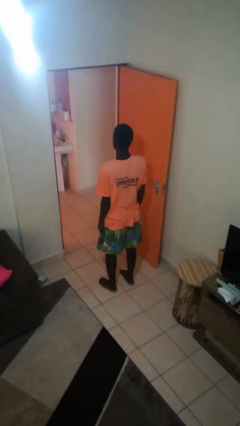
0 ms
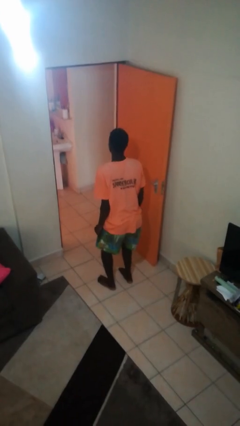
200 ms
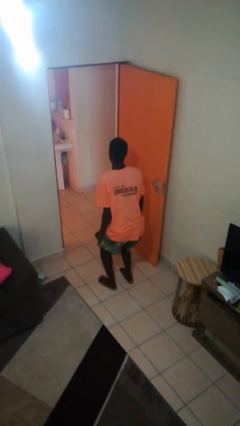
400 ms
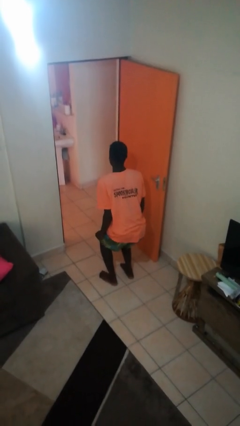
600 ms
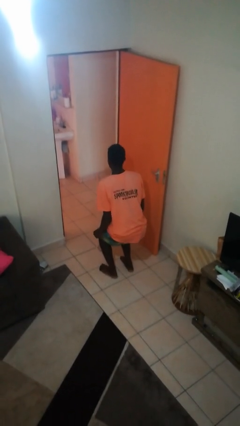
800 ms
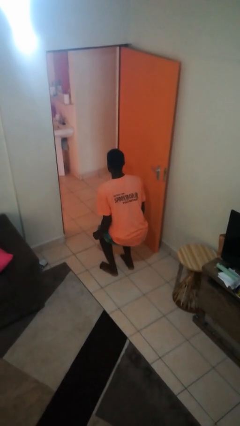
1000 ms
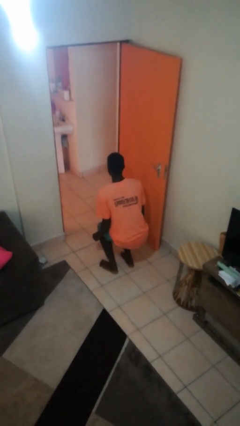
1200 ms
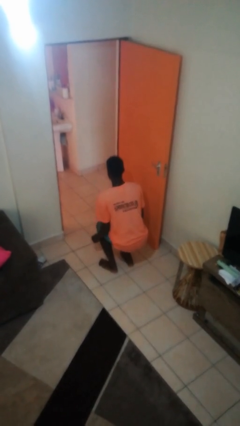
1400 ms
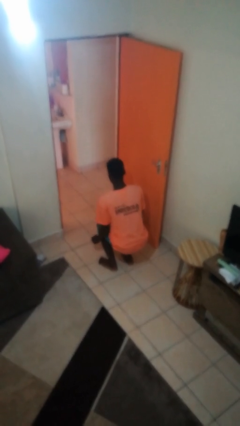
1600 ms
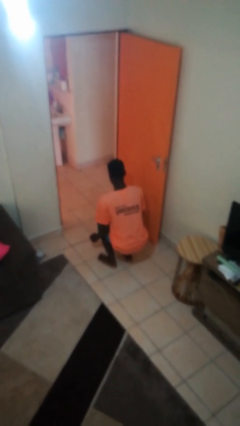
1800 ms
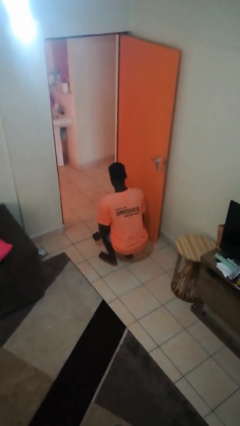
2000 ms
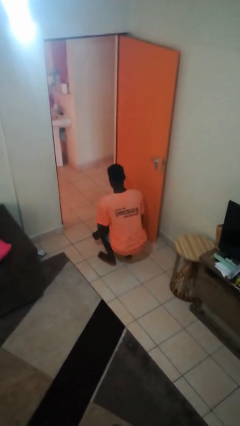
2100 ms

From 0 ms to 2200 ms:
person squats

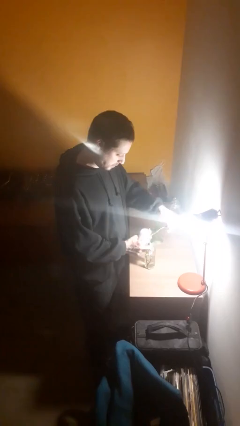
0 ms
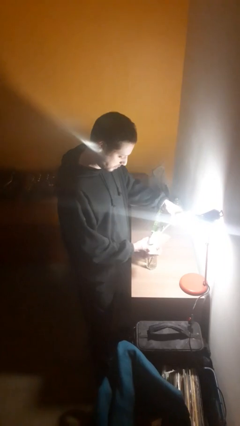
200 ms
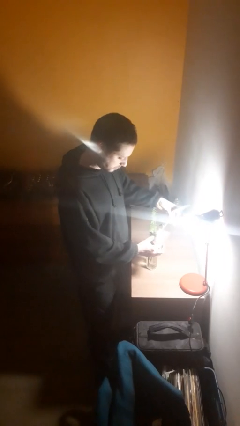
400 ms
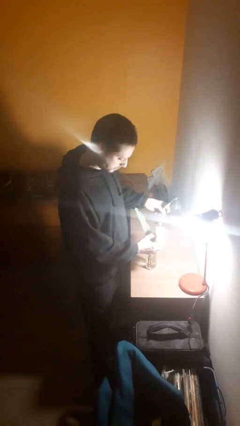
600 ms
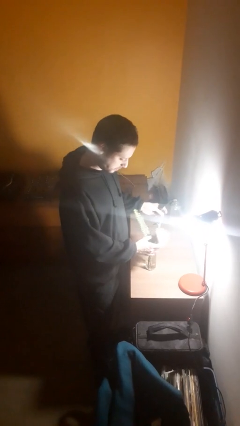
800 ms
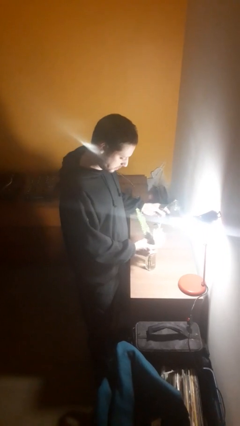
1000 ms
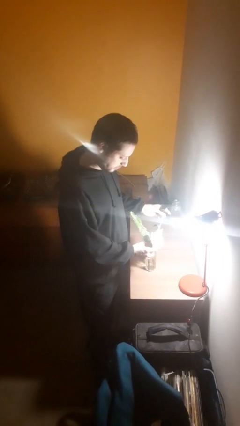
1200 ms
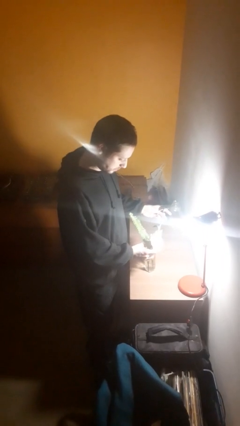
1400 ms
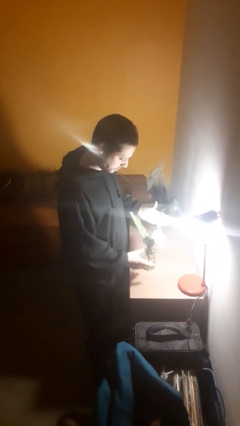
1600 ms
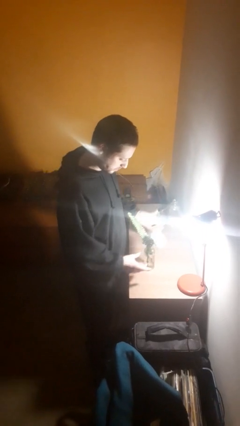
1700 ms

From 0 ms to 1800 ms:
person arranges flowers in vase

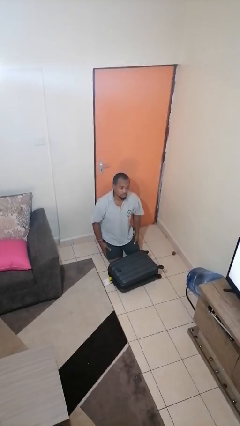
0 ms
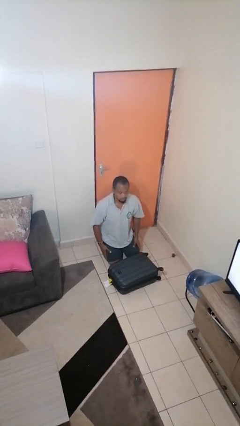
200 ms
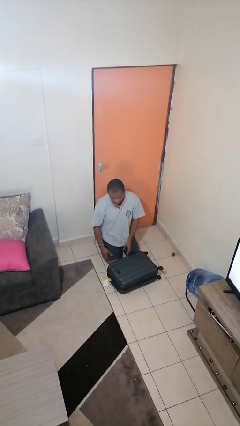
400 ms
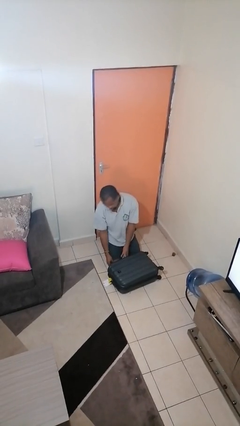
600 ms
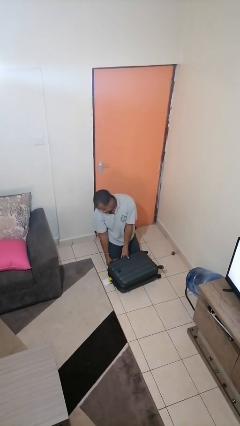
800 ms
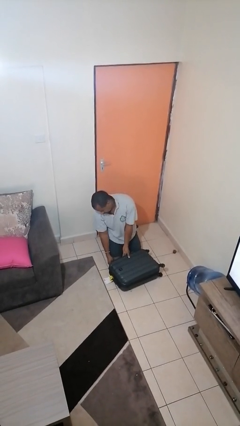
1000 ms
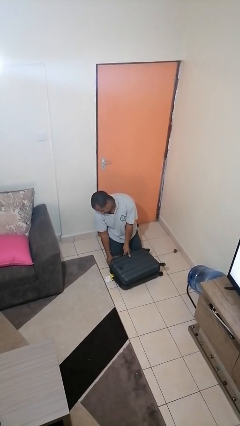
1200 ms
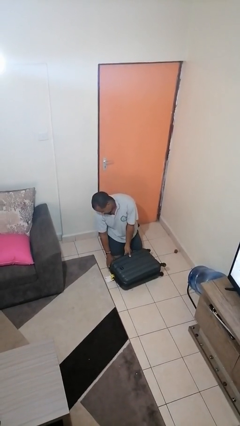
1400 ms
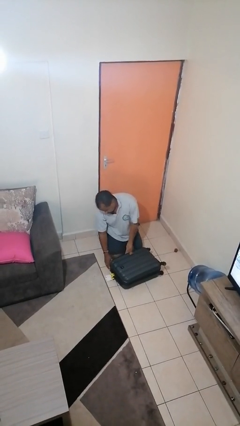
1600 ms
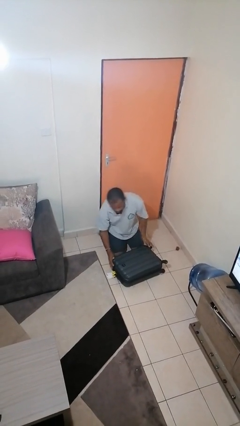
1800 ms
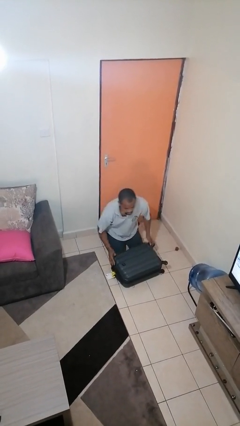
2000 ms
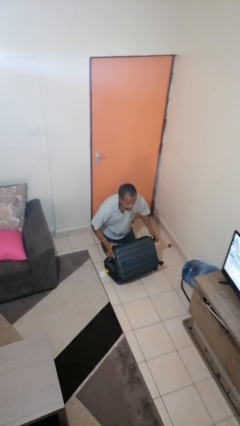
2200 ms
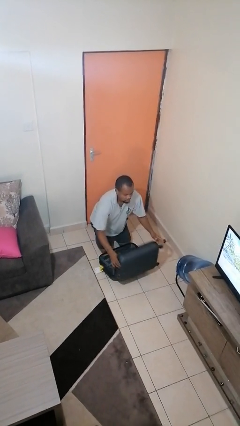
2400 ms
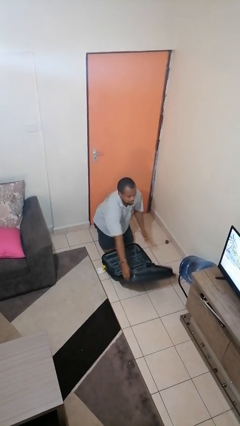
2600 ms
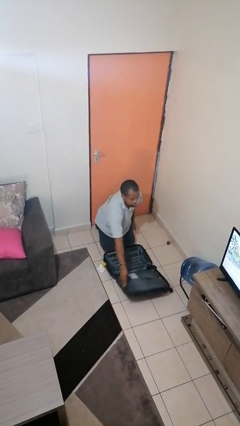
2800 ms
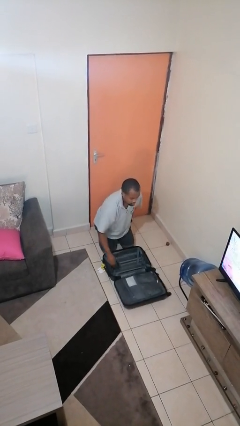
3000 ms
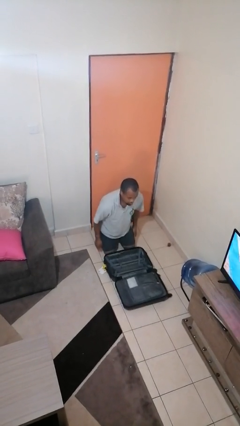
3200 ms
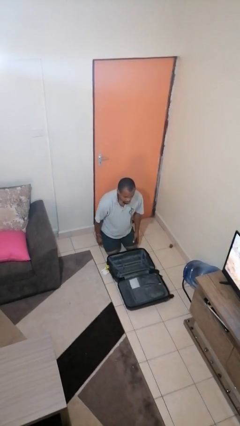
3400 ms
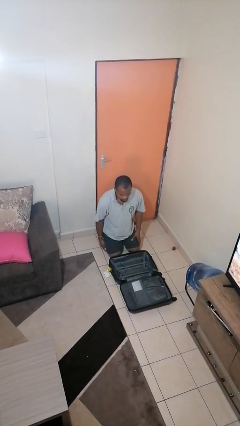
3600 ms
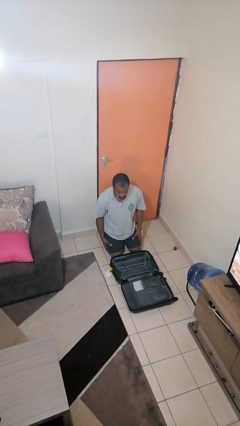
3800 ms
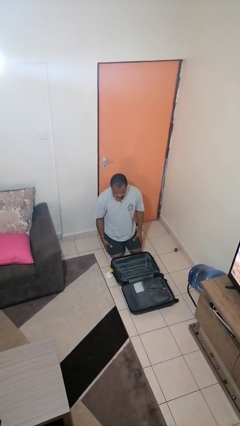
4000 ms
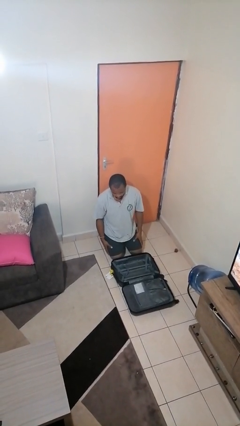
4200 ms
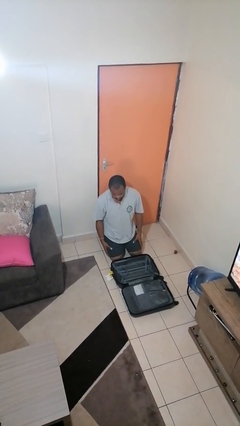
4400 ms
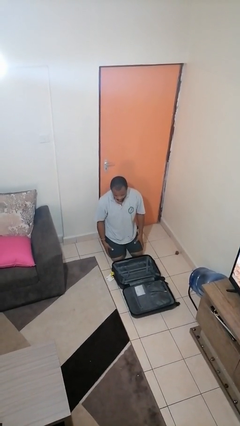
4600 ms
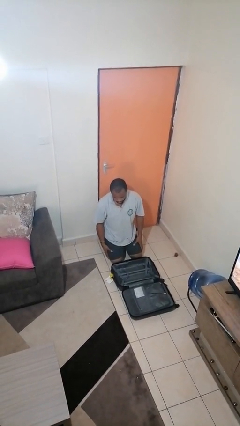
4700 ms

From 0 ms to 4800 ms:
person opens suitcase

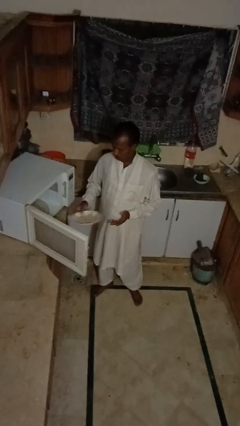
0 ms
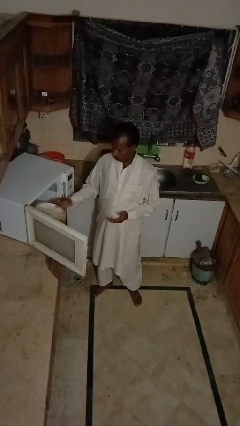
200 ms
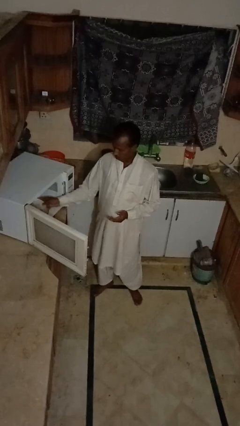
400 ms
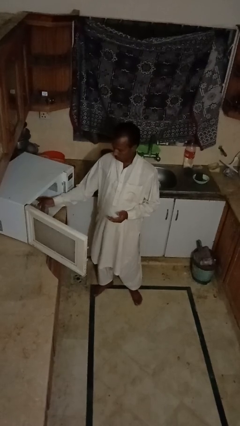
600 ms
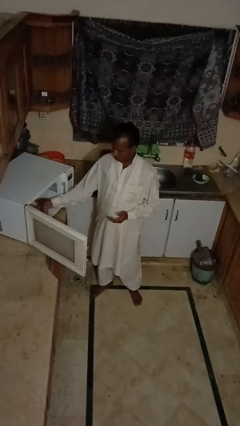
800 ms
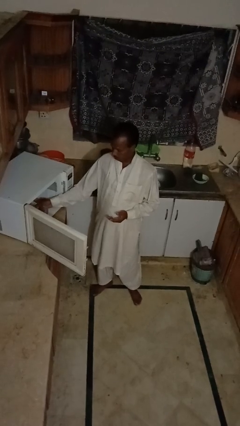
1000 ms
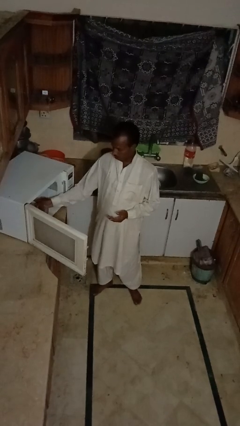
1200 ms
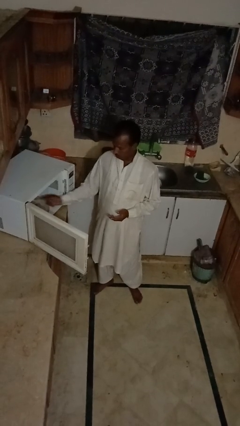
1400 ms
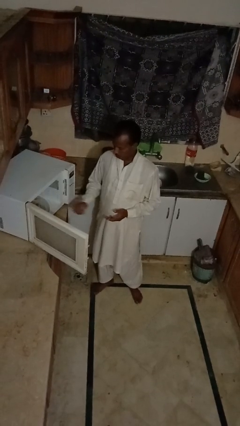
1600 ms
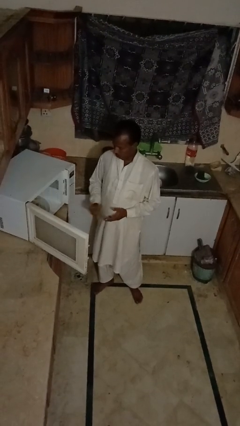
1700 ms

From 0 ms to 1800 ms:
person puts object into microwave

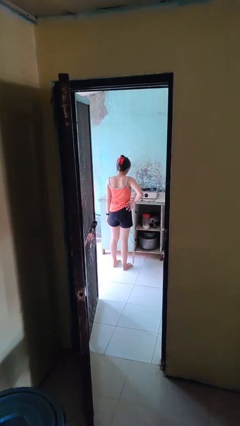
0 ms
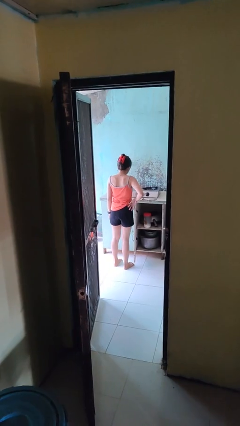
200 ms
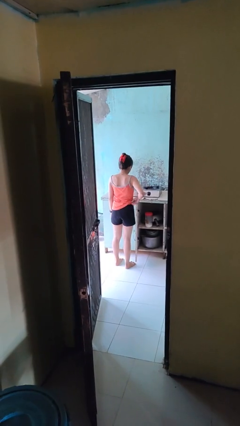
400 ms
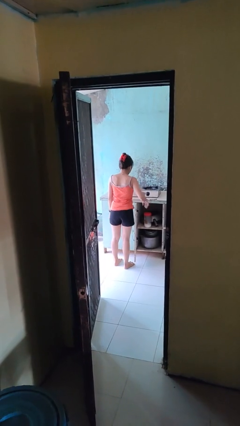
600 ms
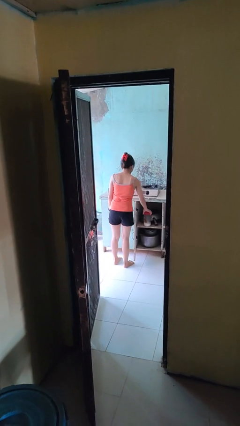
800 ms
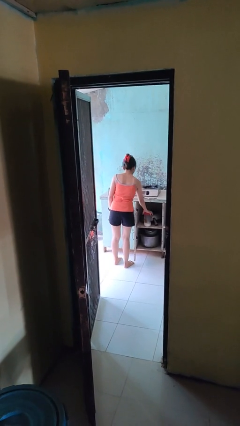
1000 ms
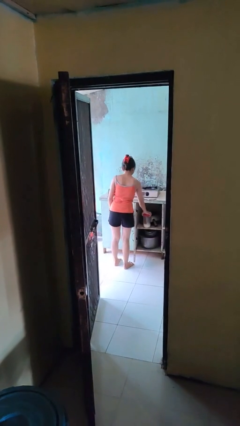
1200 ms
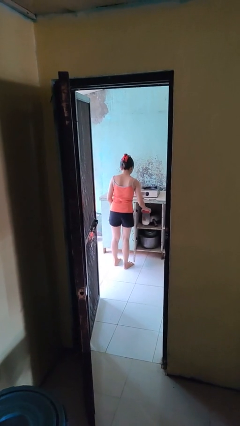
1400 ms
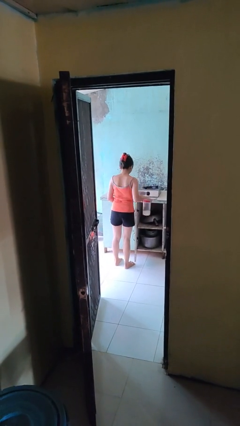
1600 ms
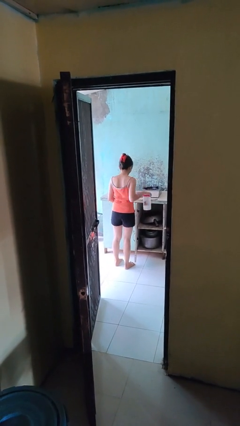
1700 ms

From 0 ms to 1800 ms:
person picks up object from cabinet

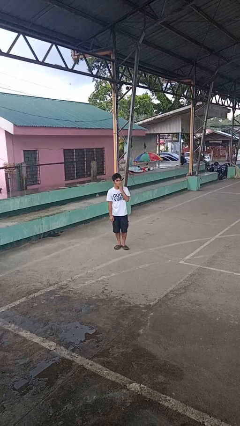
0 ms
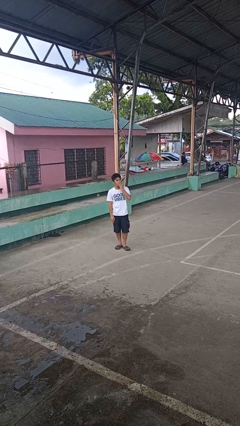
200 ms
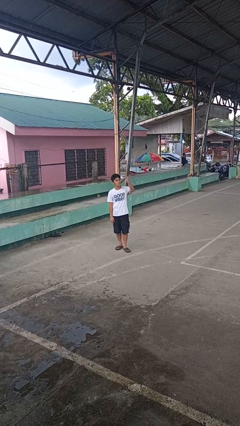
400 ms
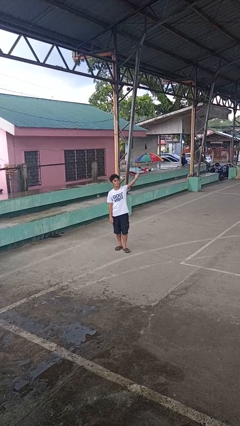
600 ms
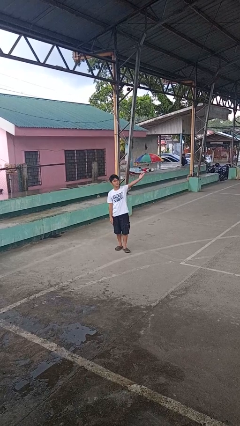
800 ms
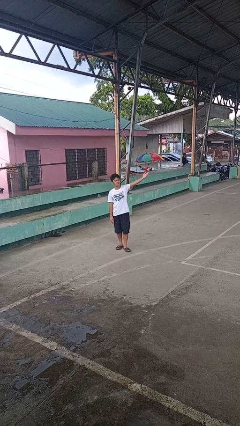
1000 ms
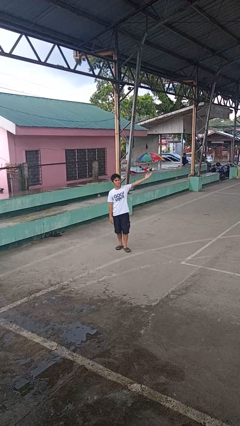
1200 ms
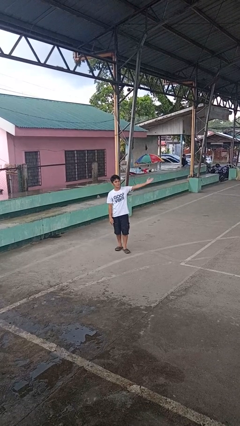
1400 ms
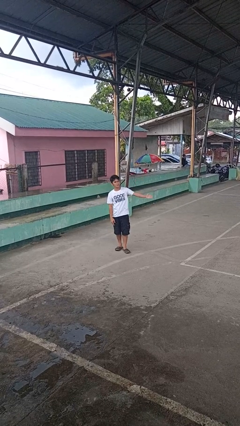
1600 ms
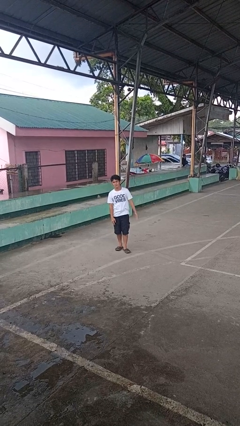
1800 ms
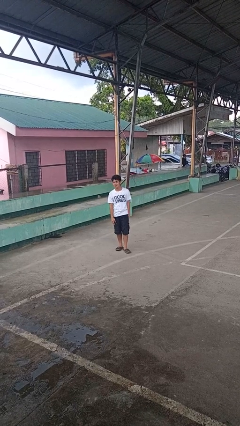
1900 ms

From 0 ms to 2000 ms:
person gestures blow kiss

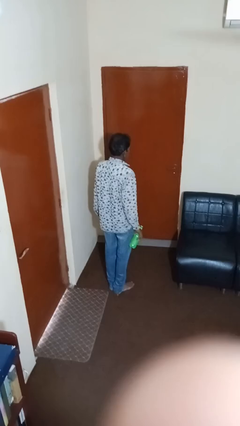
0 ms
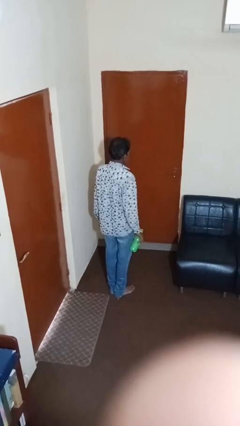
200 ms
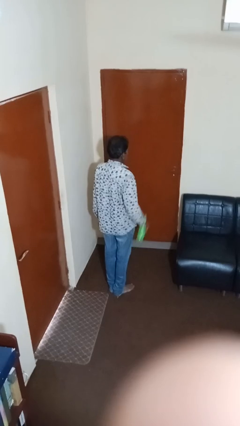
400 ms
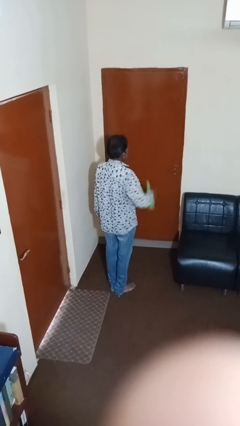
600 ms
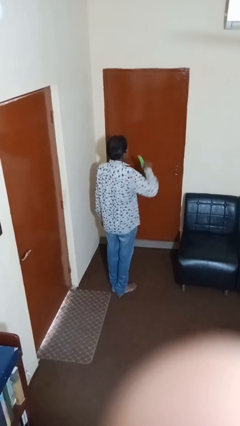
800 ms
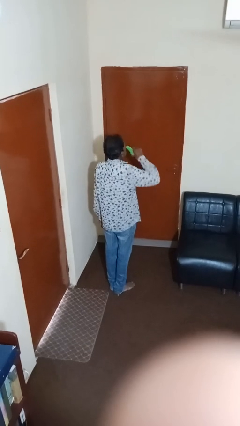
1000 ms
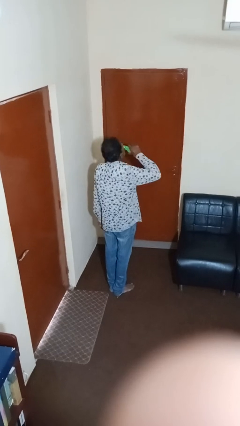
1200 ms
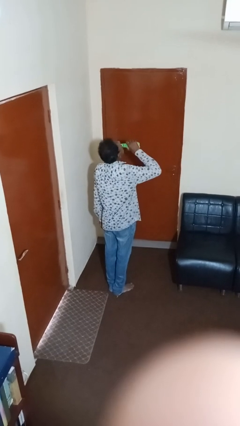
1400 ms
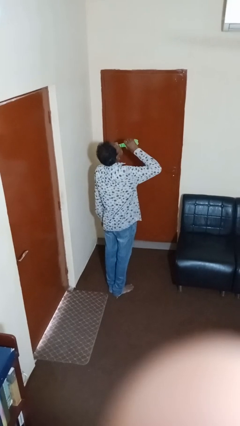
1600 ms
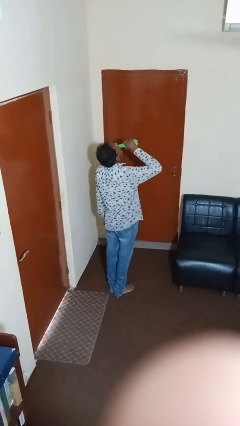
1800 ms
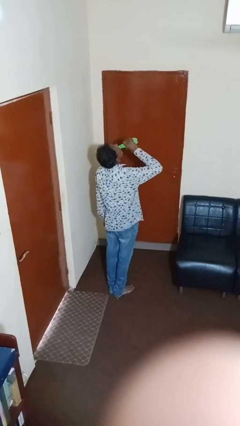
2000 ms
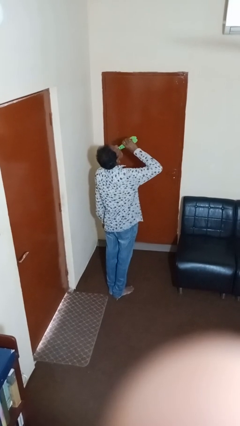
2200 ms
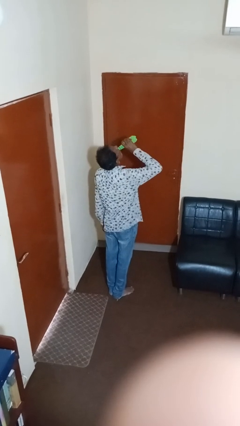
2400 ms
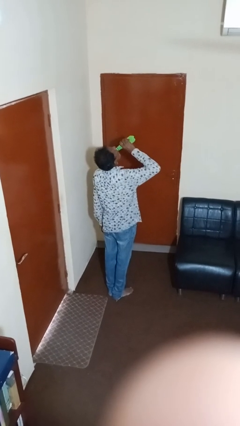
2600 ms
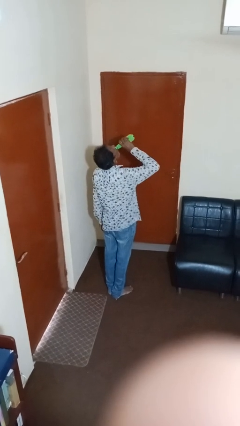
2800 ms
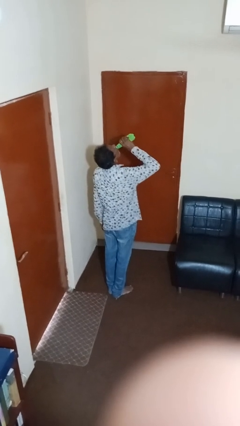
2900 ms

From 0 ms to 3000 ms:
person drinks from bottle
